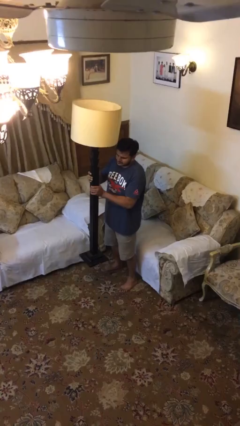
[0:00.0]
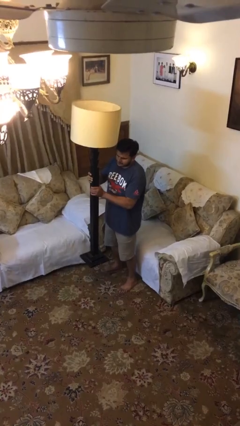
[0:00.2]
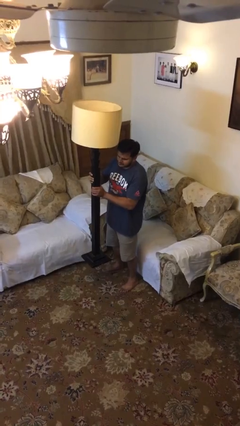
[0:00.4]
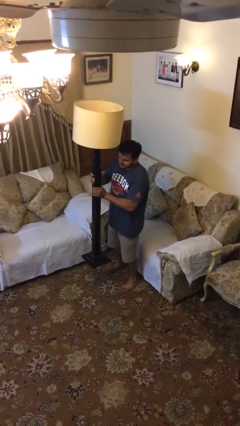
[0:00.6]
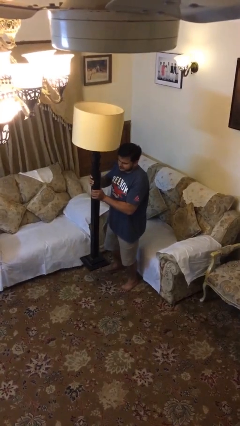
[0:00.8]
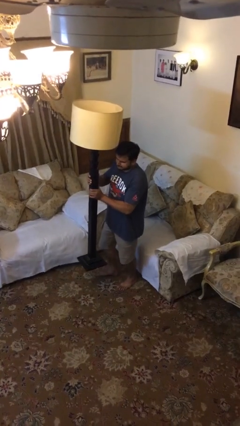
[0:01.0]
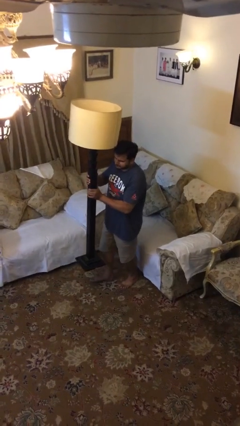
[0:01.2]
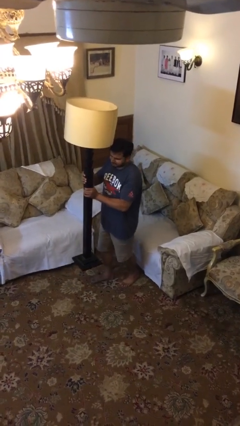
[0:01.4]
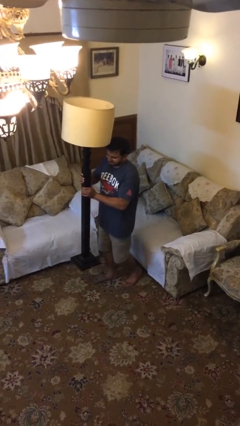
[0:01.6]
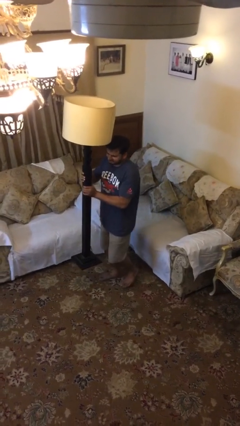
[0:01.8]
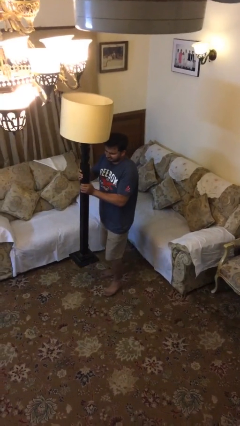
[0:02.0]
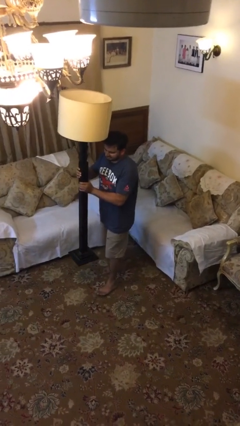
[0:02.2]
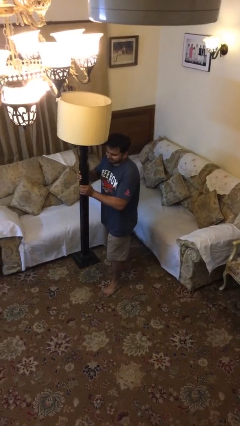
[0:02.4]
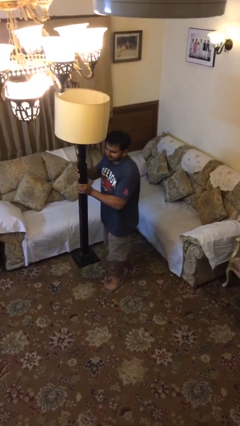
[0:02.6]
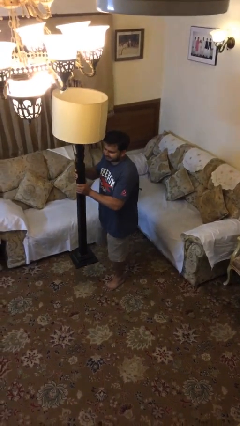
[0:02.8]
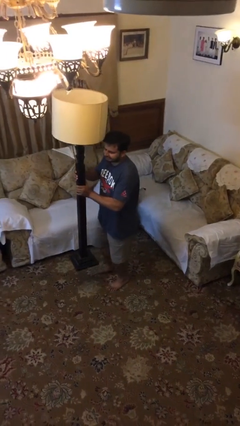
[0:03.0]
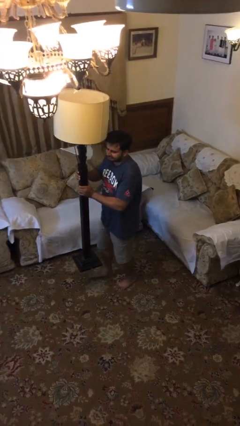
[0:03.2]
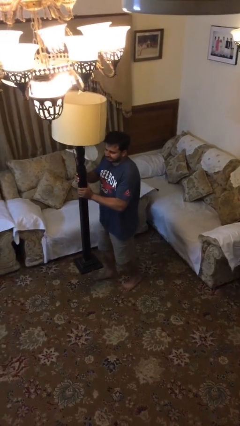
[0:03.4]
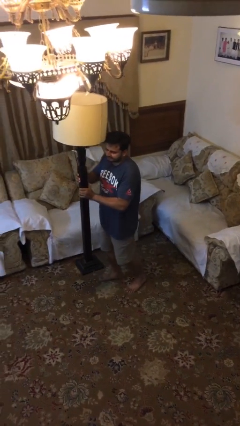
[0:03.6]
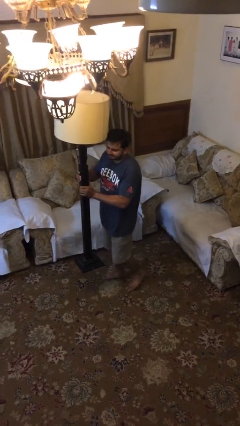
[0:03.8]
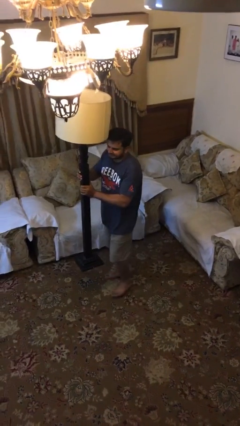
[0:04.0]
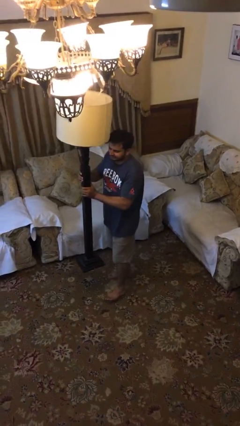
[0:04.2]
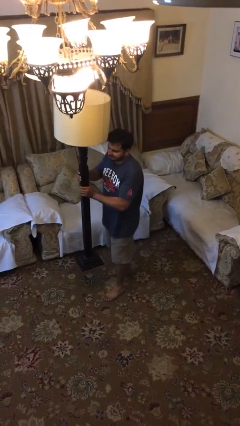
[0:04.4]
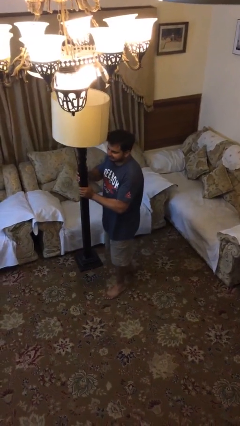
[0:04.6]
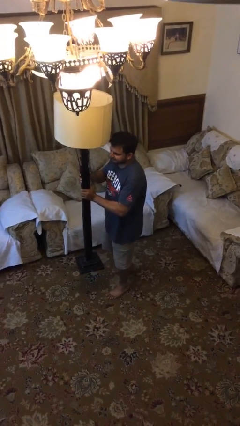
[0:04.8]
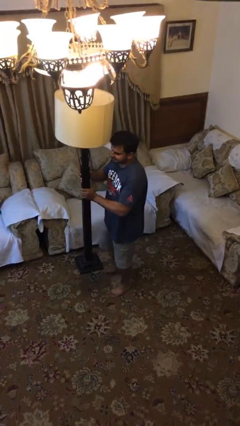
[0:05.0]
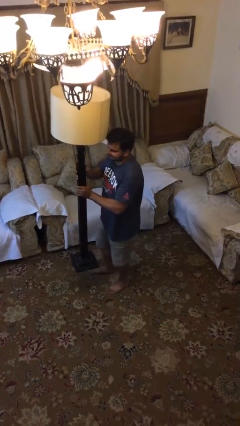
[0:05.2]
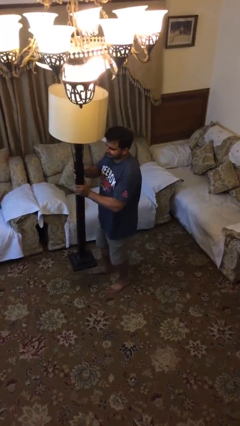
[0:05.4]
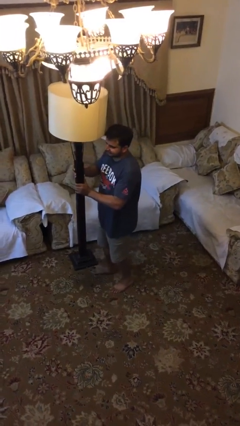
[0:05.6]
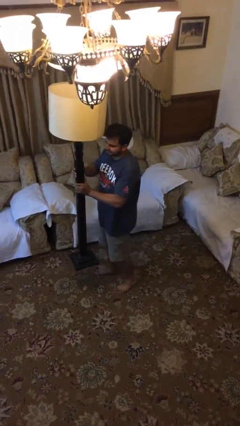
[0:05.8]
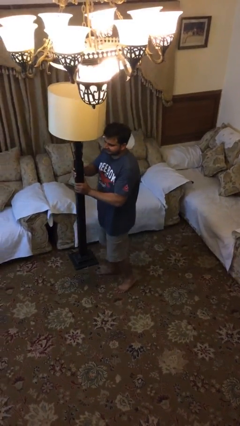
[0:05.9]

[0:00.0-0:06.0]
person carries heavy object

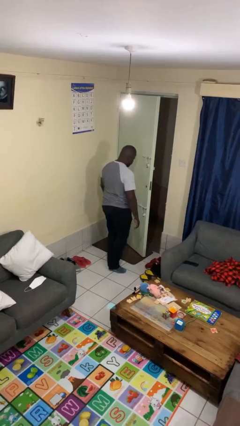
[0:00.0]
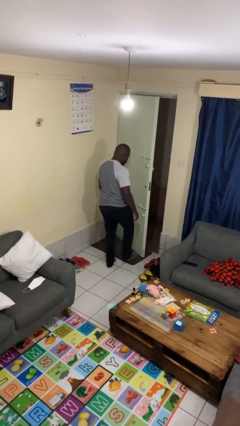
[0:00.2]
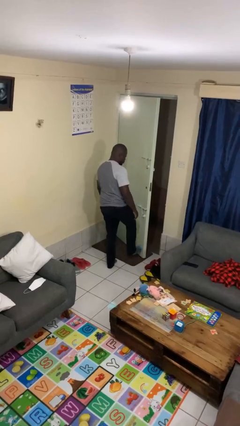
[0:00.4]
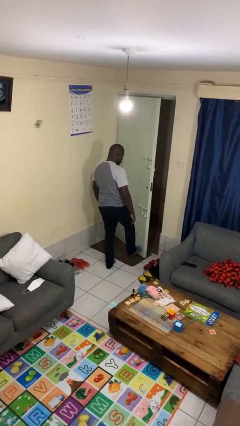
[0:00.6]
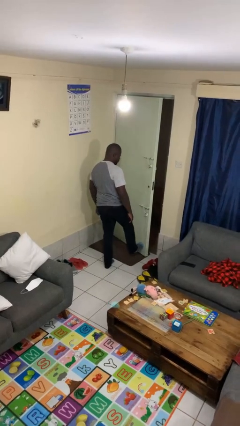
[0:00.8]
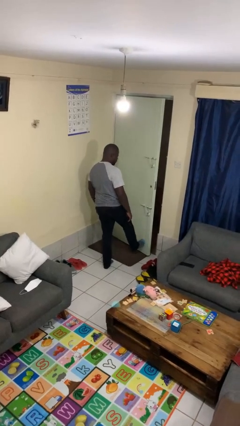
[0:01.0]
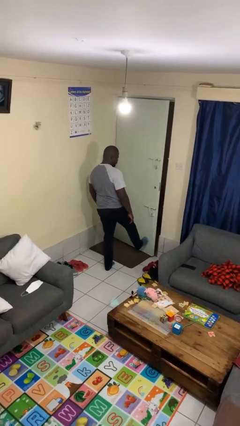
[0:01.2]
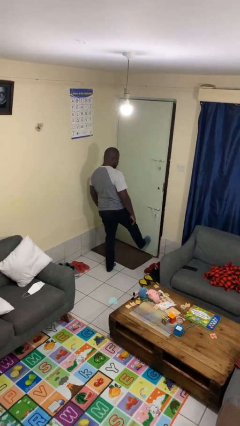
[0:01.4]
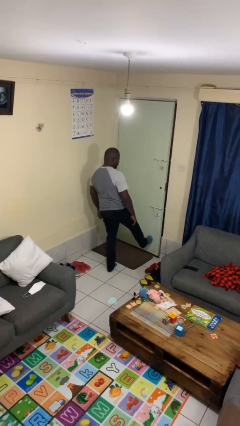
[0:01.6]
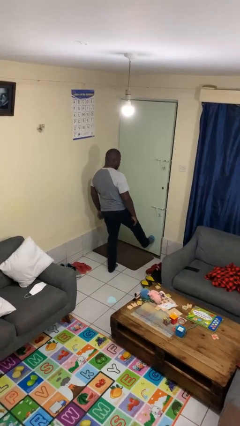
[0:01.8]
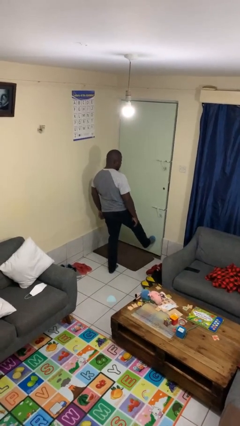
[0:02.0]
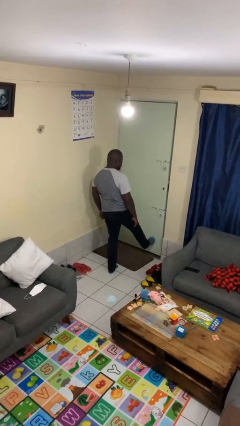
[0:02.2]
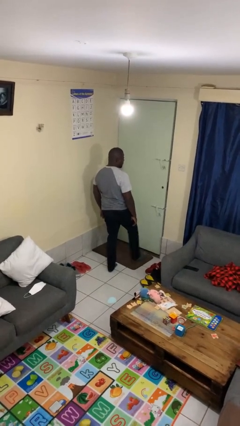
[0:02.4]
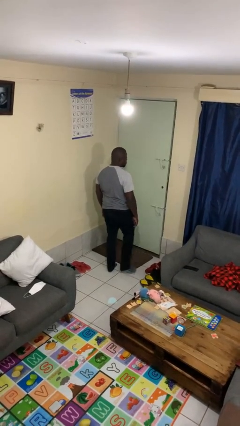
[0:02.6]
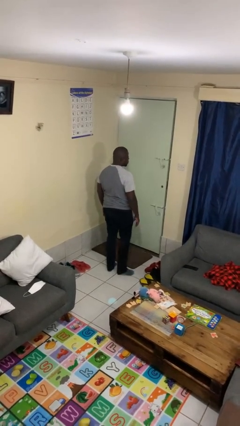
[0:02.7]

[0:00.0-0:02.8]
person closes door with foot

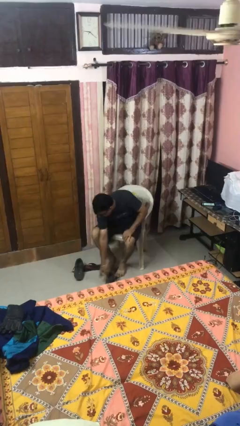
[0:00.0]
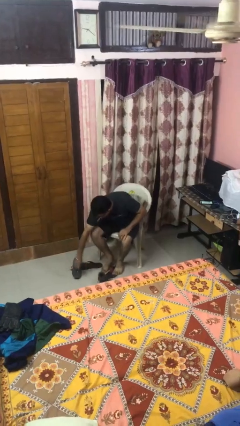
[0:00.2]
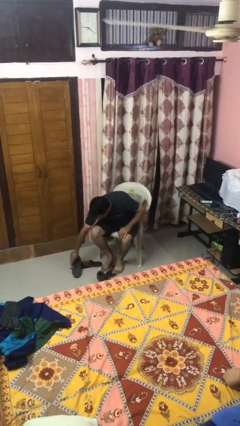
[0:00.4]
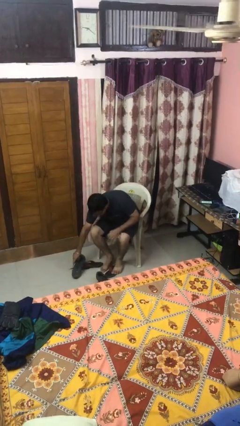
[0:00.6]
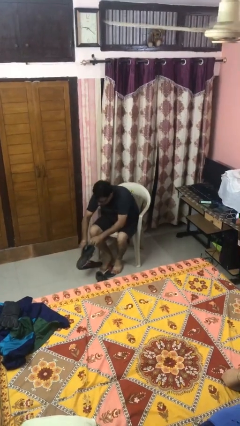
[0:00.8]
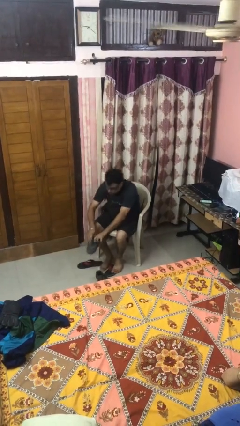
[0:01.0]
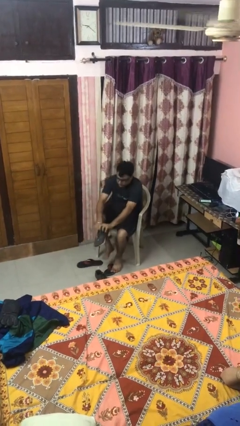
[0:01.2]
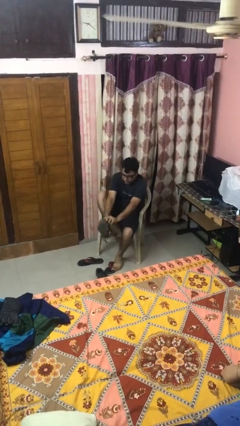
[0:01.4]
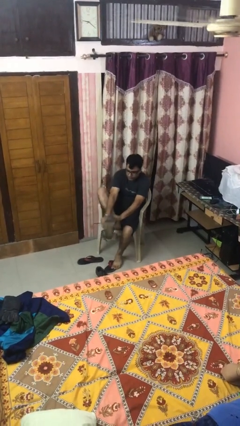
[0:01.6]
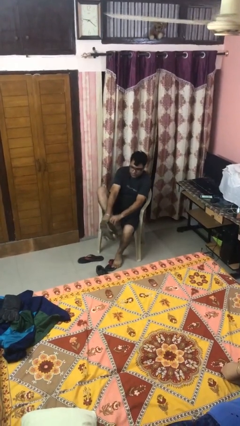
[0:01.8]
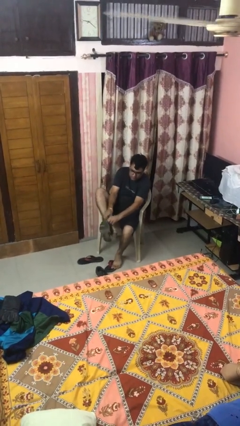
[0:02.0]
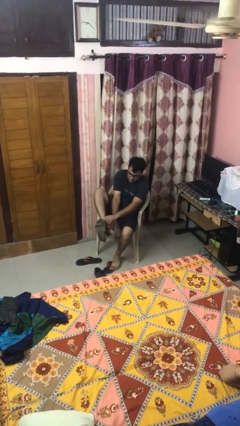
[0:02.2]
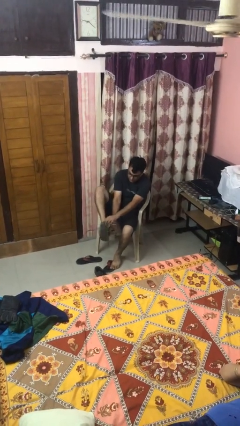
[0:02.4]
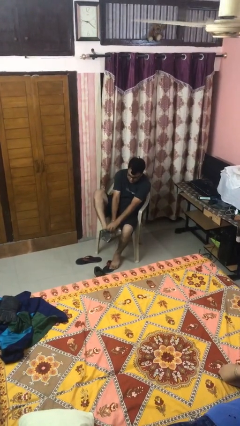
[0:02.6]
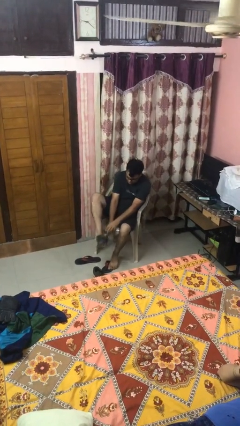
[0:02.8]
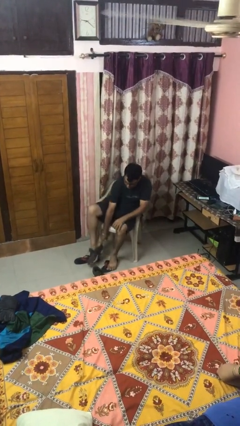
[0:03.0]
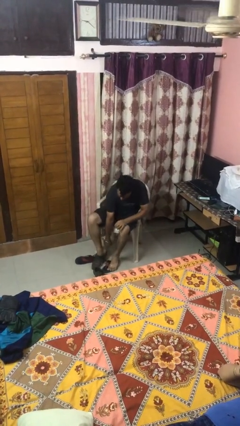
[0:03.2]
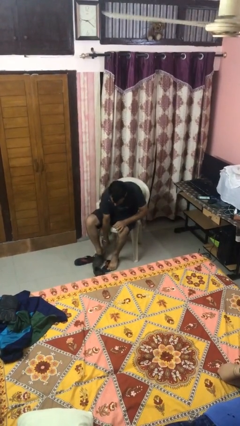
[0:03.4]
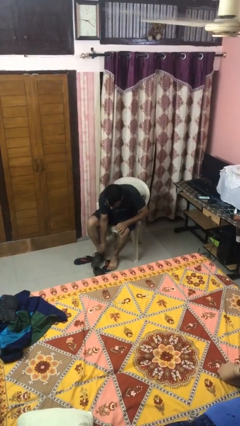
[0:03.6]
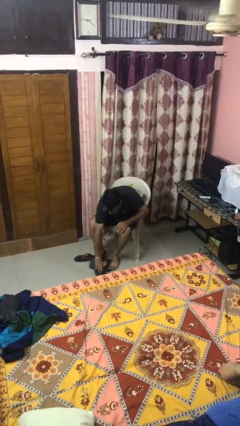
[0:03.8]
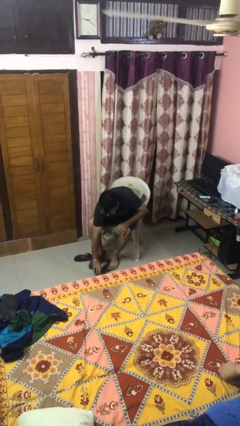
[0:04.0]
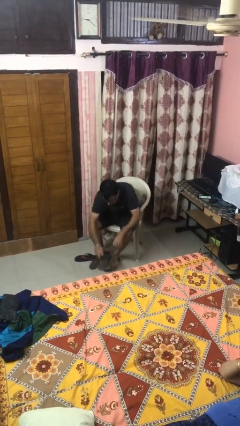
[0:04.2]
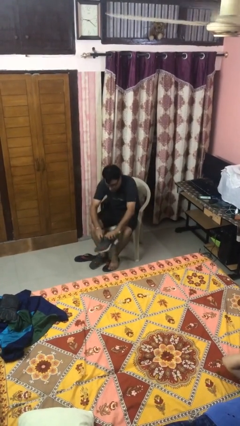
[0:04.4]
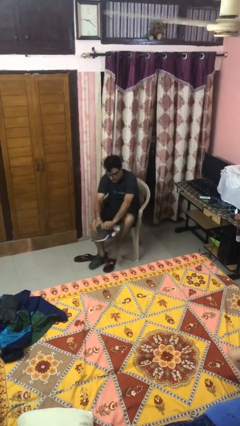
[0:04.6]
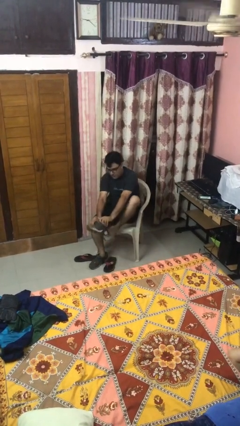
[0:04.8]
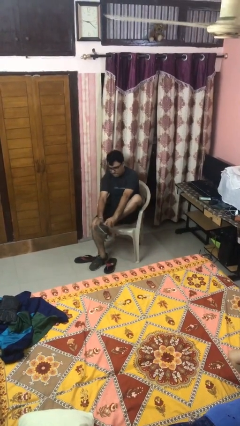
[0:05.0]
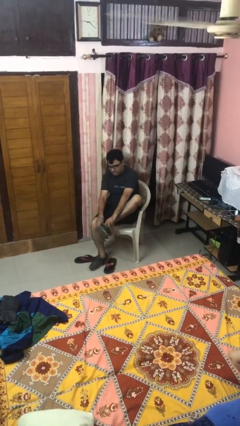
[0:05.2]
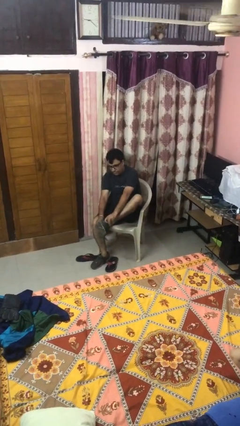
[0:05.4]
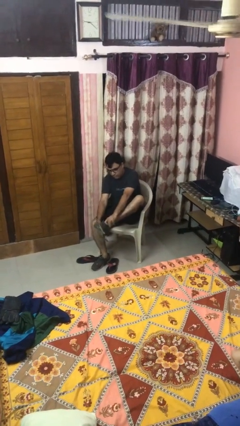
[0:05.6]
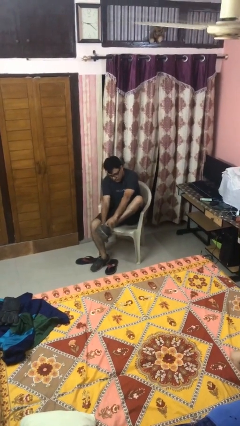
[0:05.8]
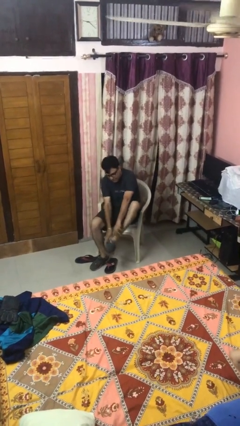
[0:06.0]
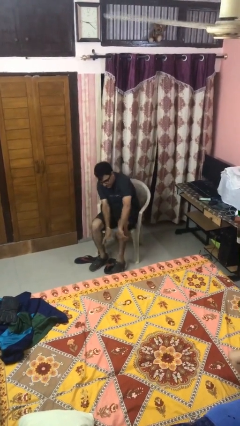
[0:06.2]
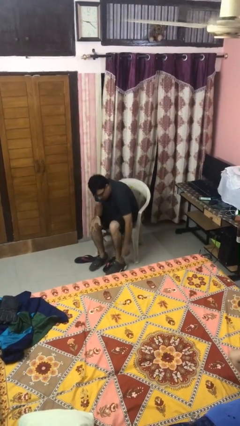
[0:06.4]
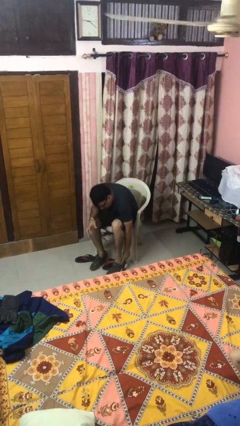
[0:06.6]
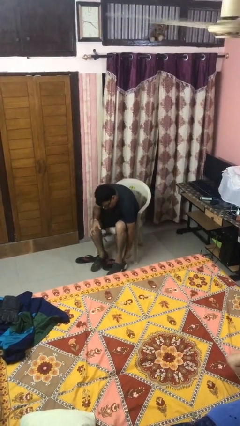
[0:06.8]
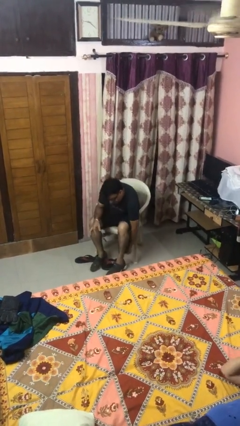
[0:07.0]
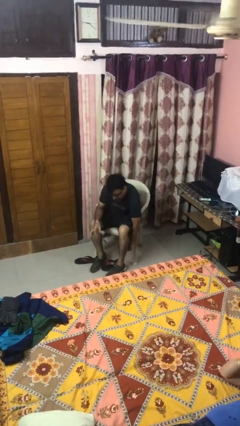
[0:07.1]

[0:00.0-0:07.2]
person puts on shoes

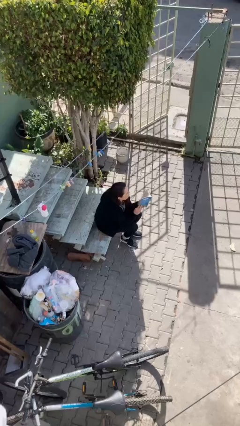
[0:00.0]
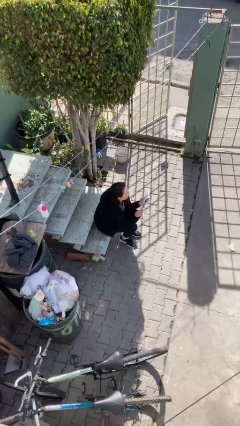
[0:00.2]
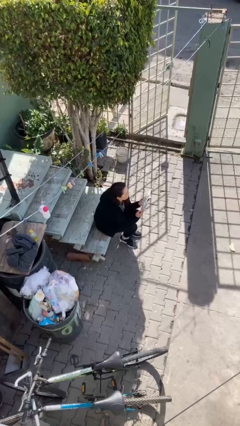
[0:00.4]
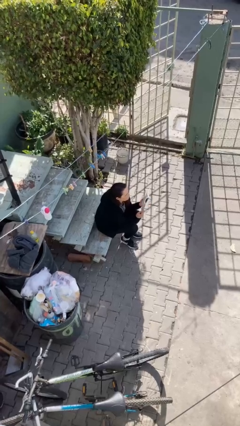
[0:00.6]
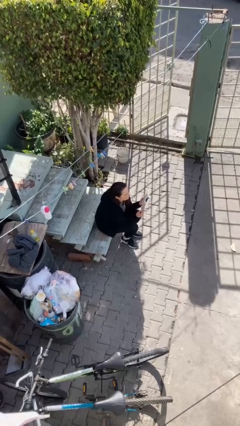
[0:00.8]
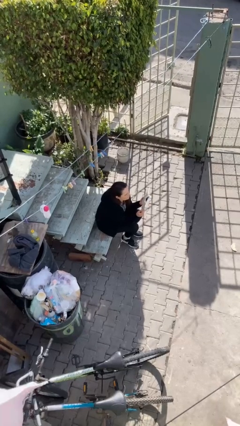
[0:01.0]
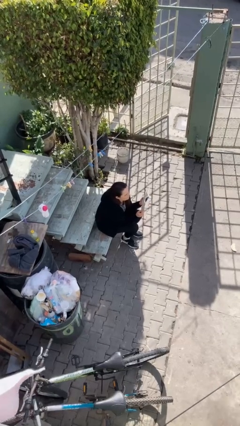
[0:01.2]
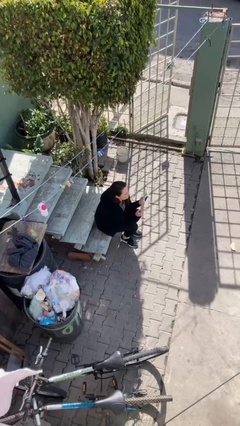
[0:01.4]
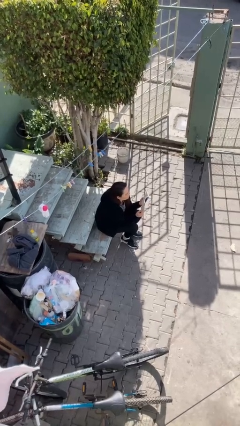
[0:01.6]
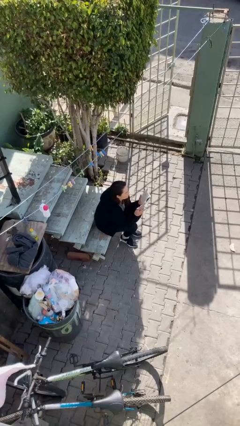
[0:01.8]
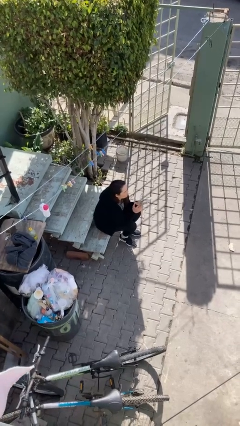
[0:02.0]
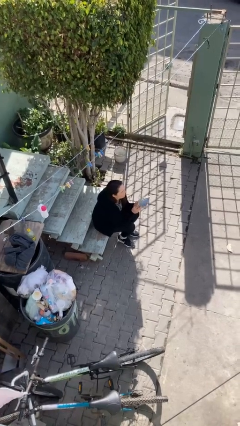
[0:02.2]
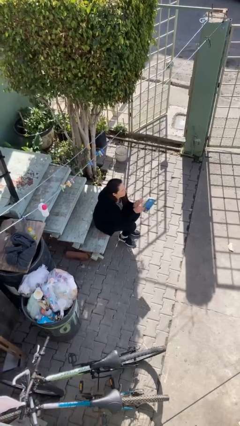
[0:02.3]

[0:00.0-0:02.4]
person reads document
